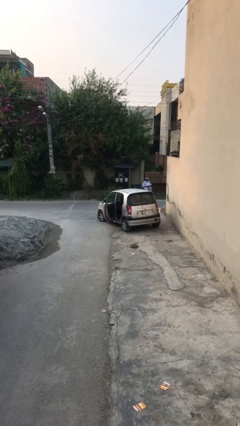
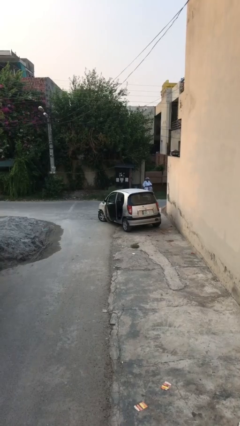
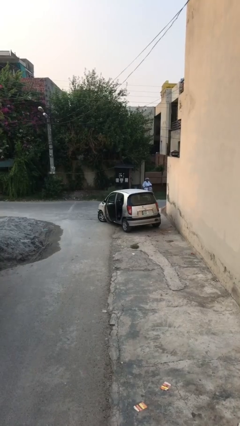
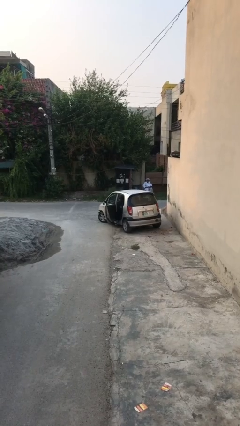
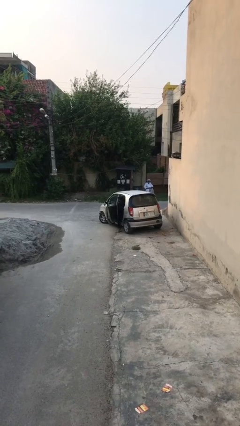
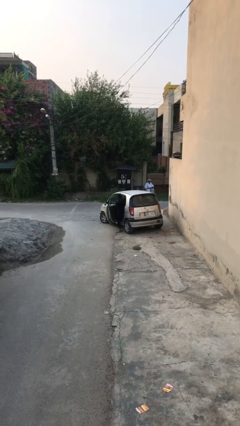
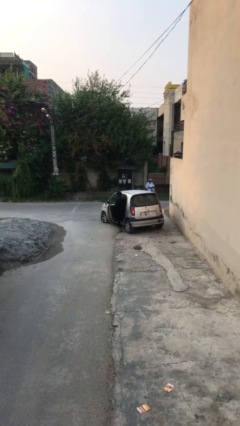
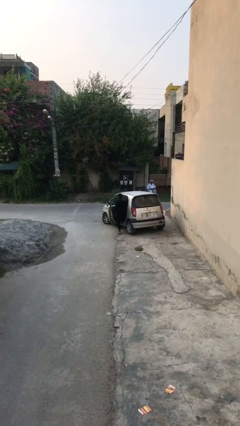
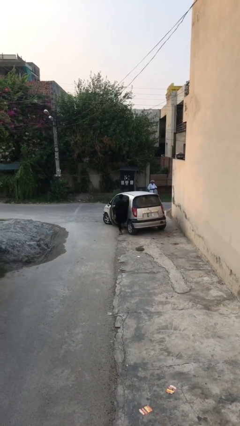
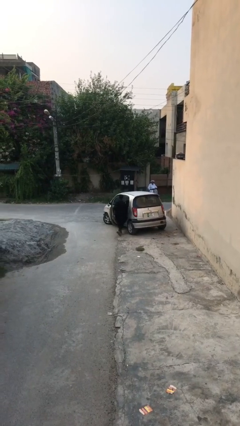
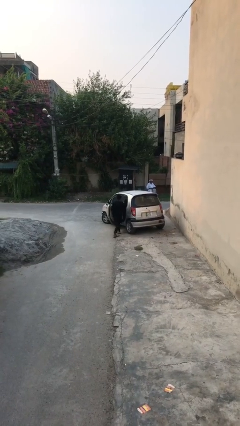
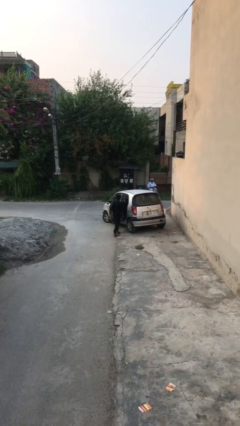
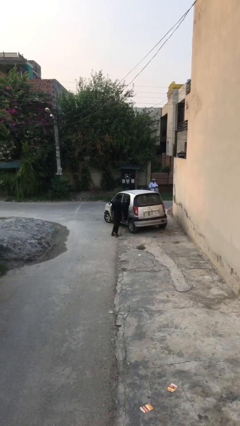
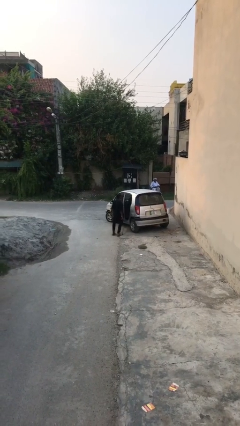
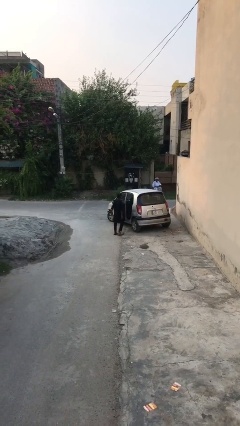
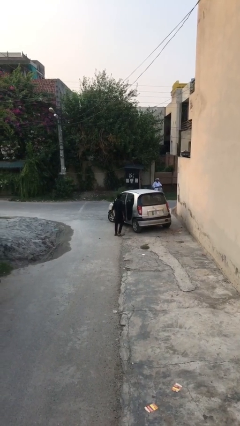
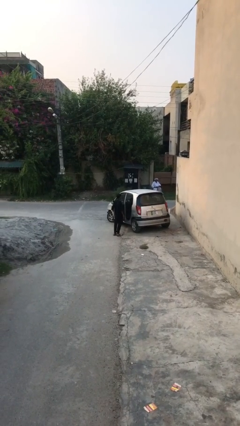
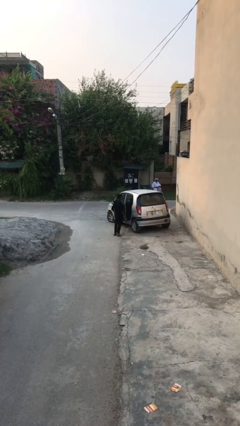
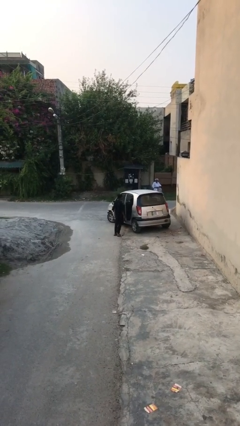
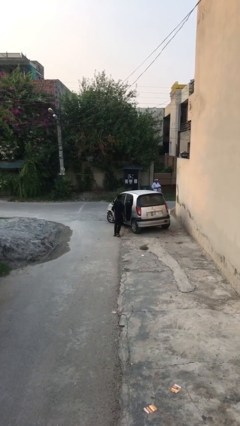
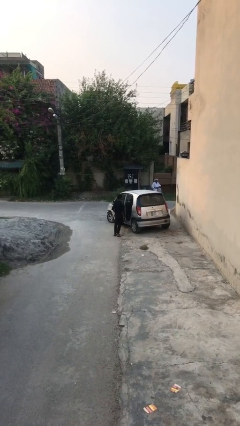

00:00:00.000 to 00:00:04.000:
person exits car

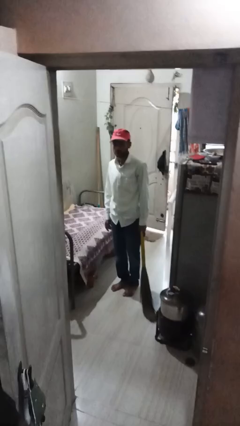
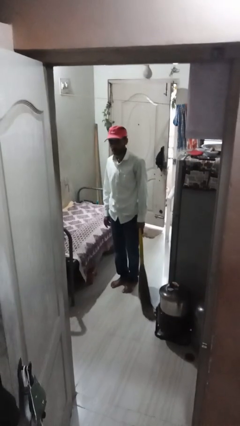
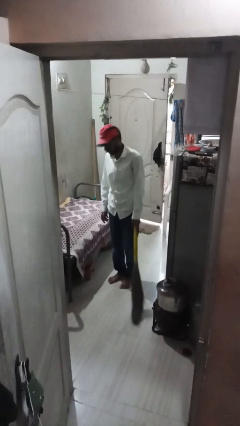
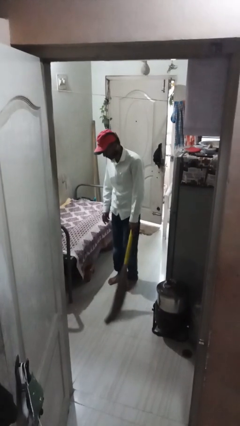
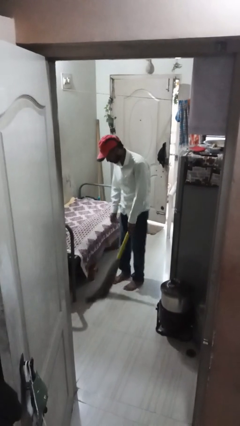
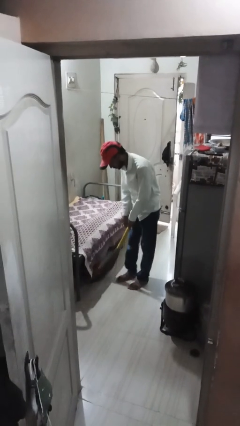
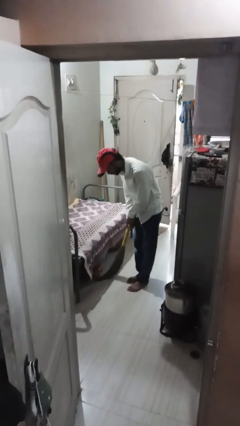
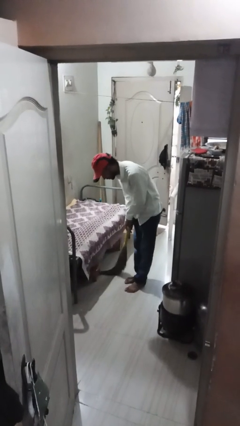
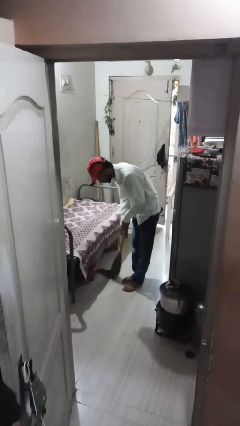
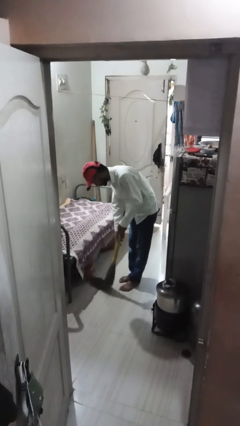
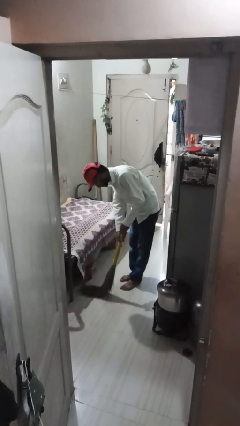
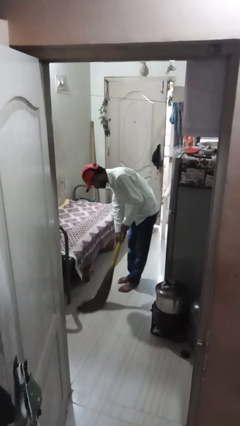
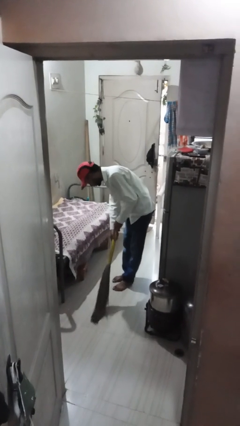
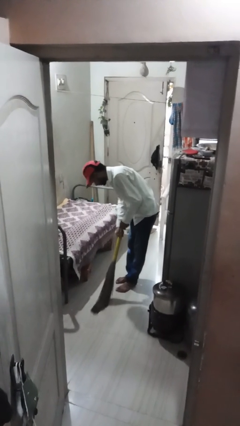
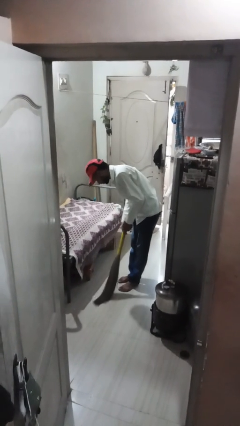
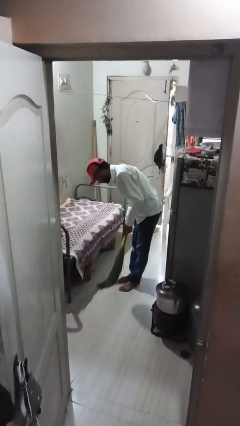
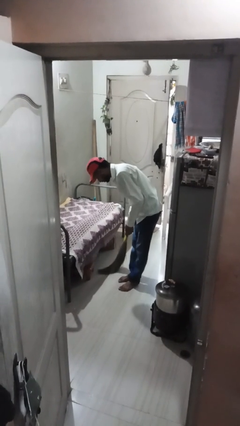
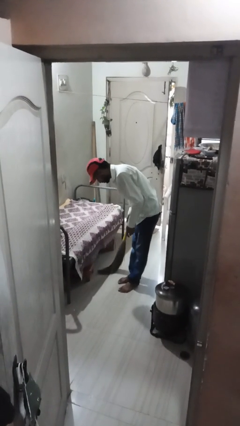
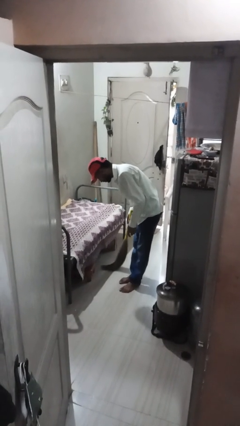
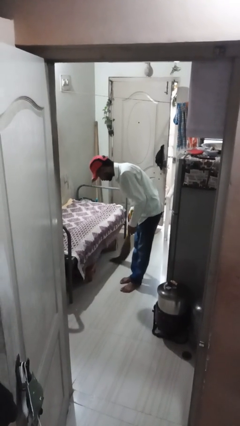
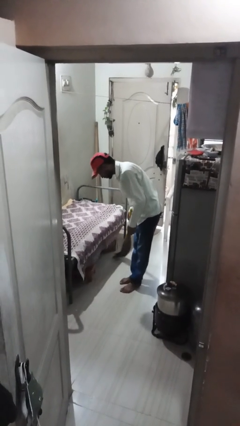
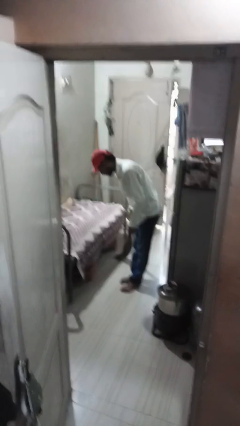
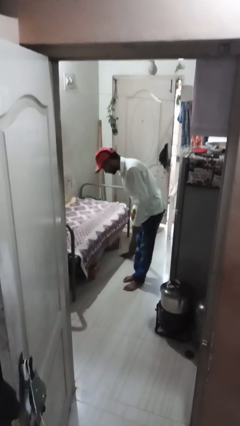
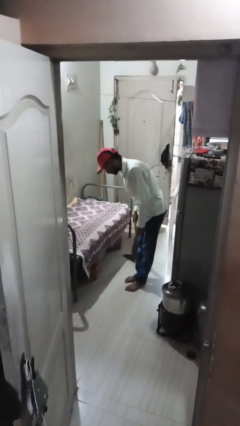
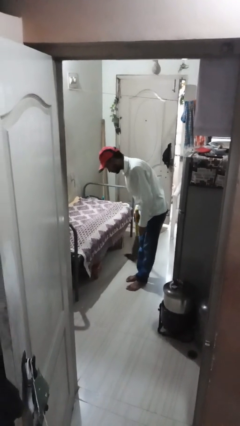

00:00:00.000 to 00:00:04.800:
person sweeps floor

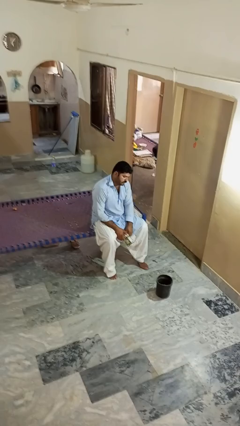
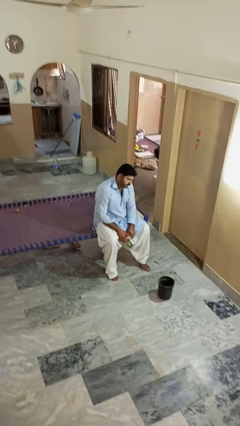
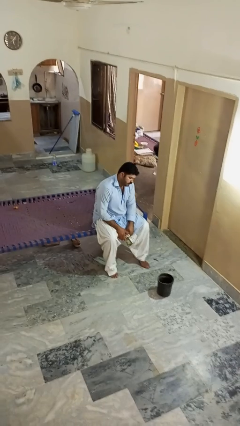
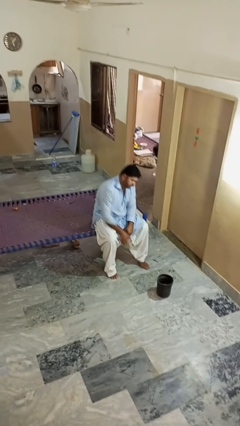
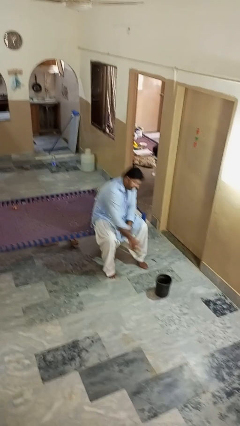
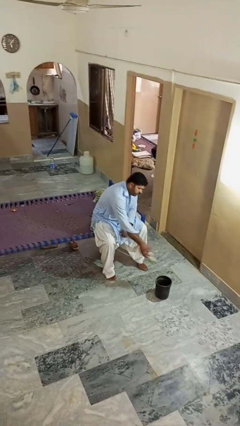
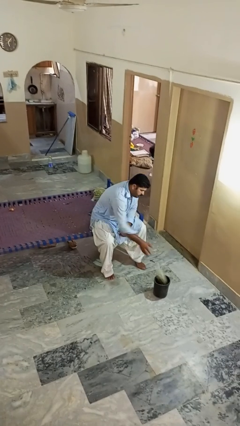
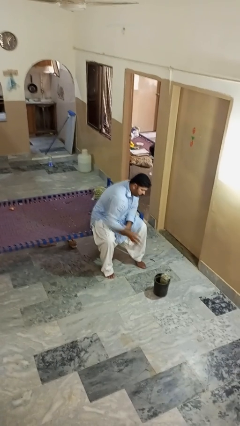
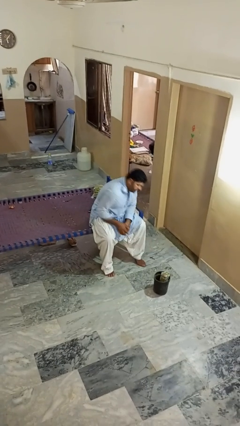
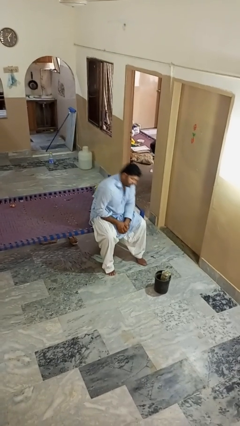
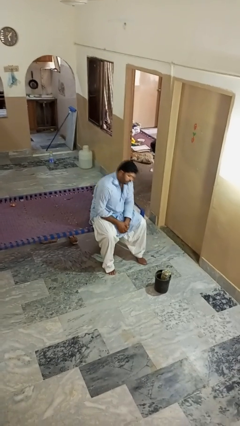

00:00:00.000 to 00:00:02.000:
person puts object into basket

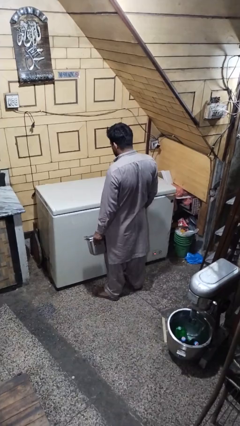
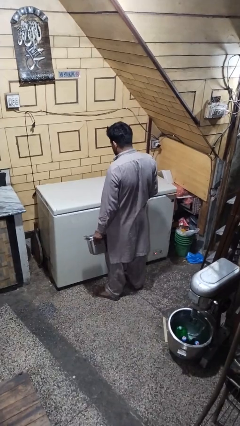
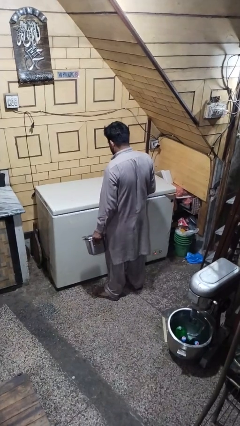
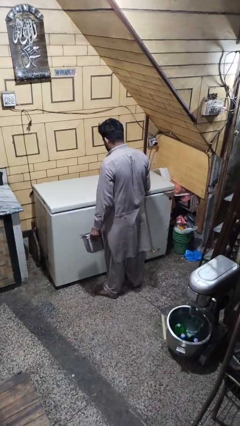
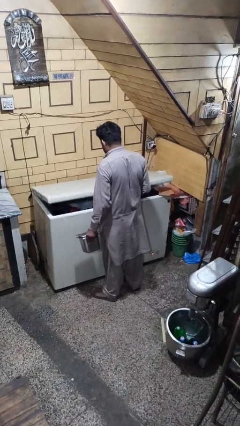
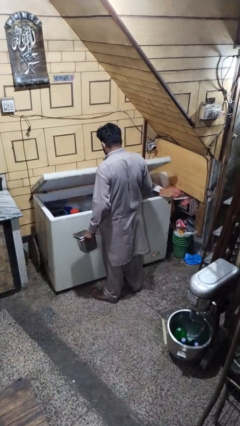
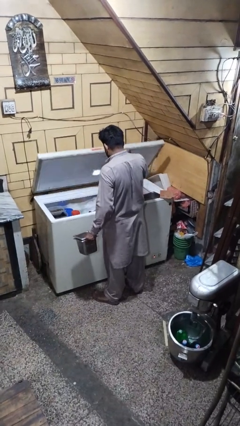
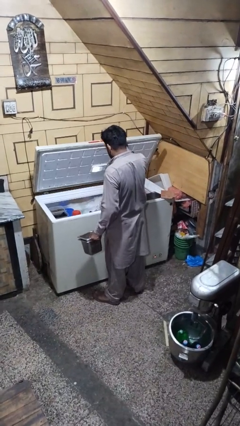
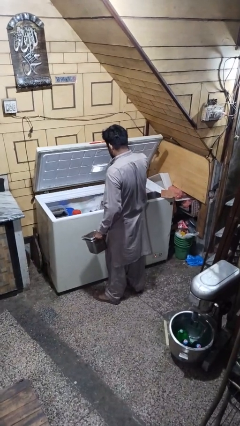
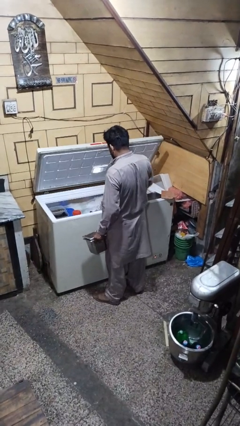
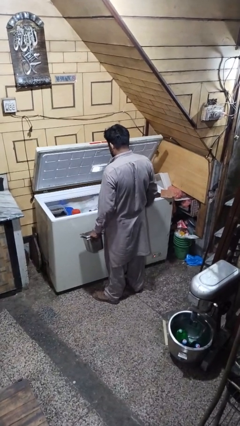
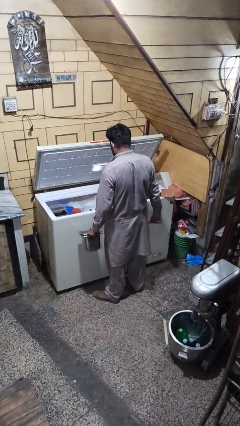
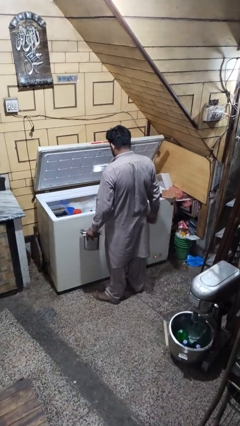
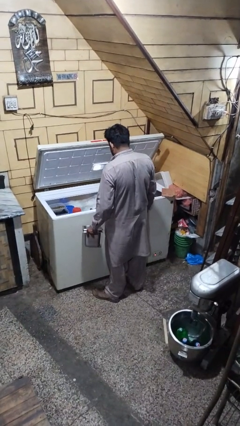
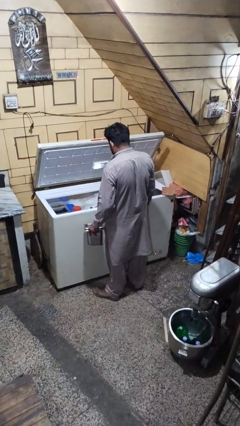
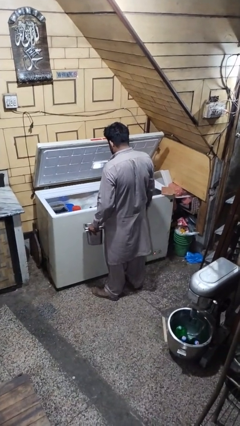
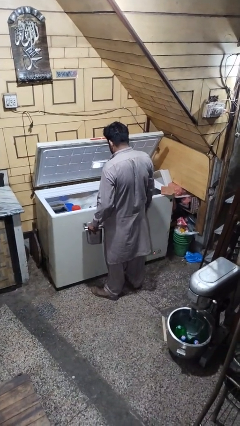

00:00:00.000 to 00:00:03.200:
person opens refrigerator

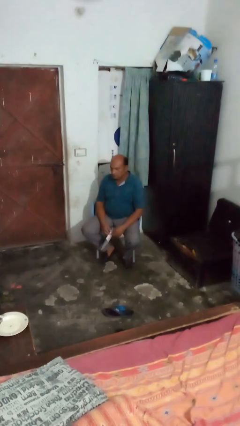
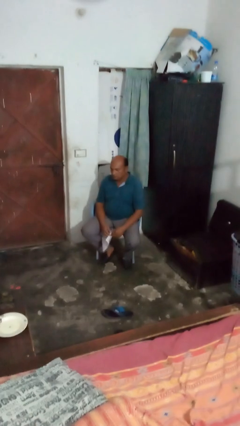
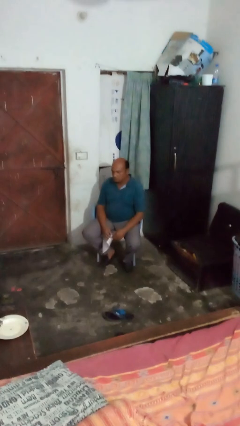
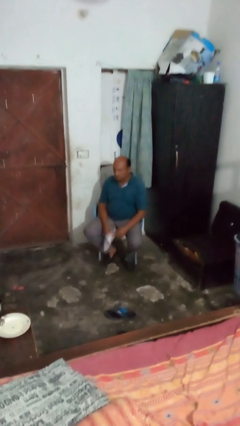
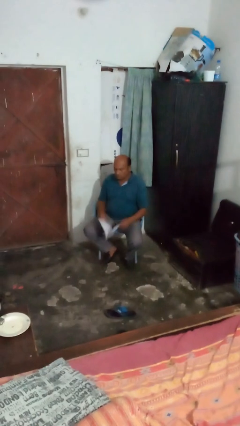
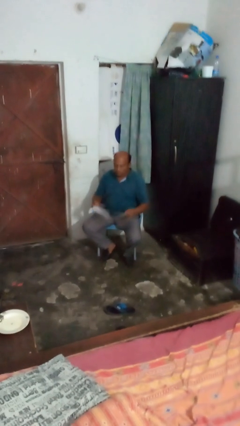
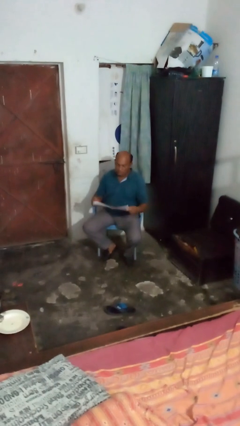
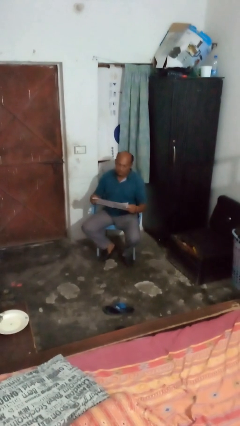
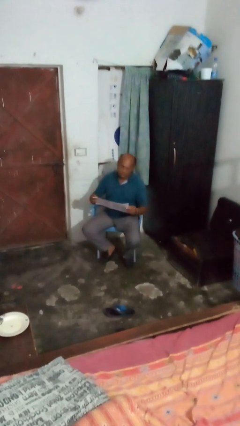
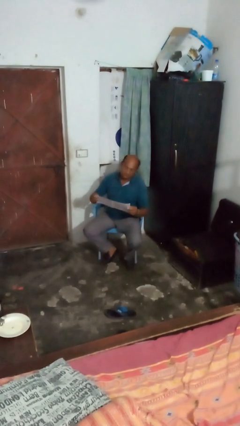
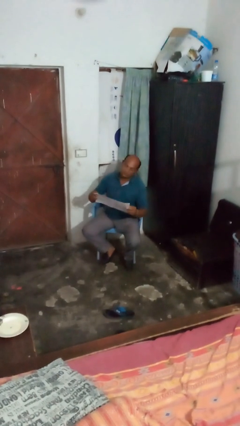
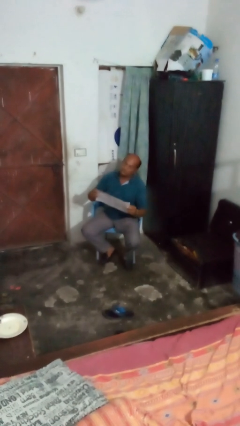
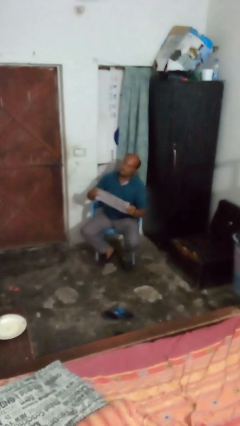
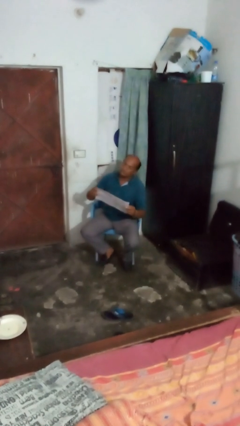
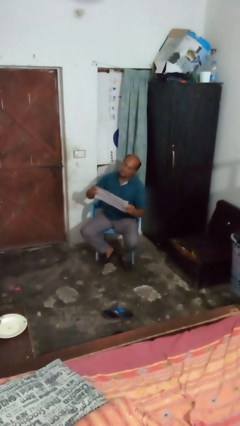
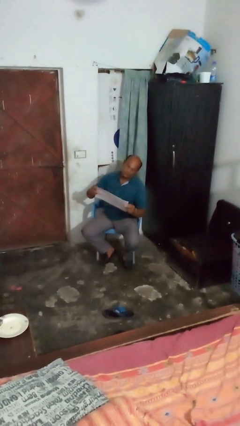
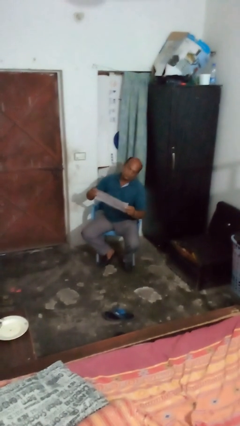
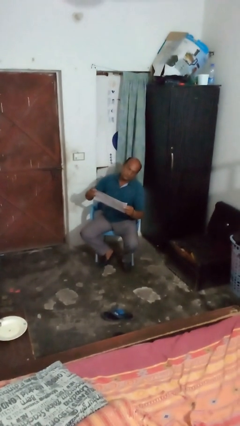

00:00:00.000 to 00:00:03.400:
person reads newspaper

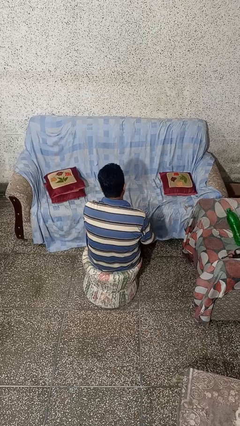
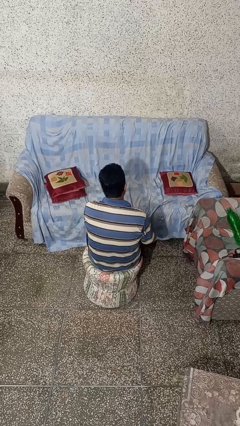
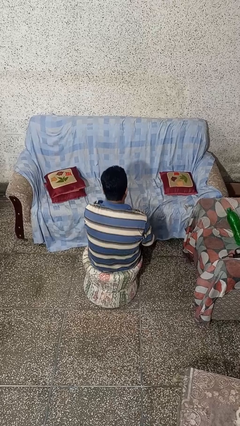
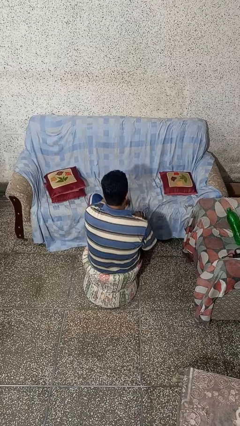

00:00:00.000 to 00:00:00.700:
person rubs foot
